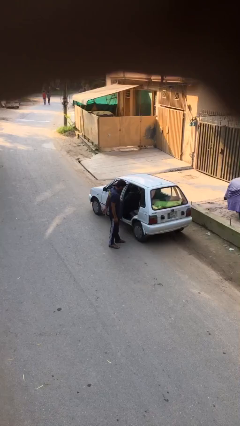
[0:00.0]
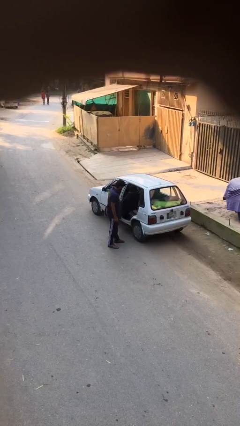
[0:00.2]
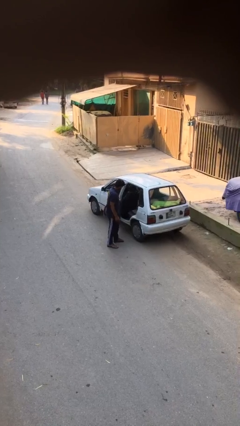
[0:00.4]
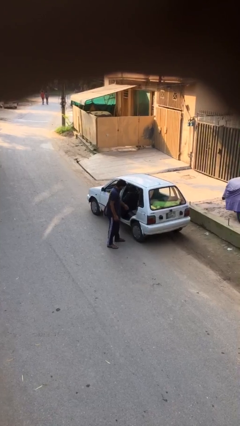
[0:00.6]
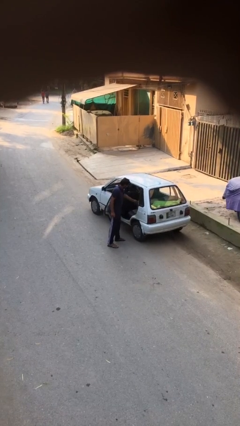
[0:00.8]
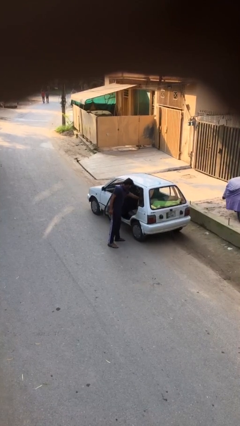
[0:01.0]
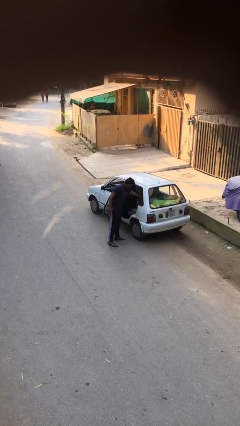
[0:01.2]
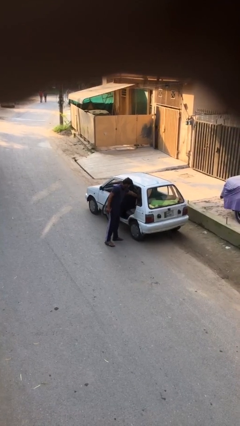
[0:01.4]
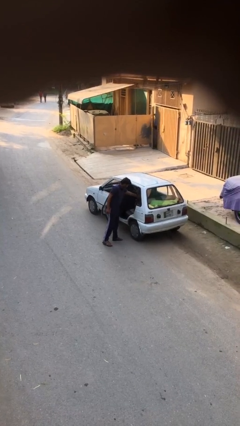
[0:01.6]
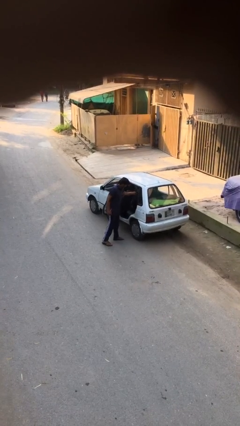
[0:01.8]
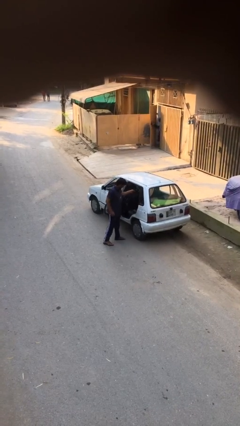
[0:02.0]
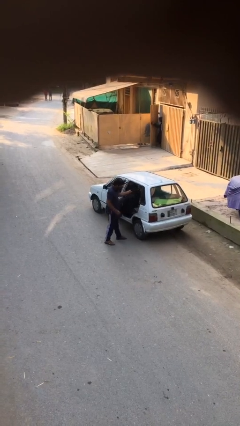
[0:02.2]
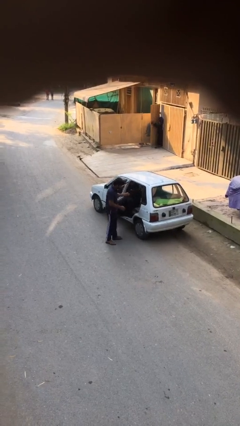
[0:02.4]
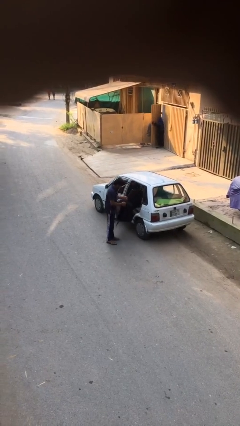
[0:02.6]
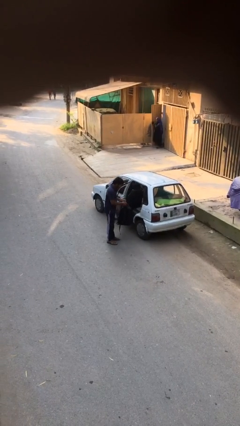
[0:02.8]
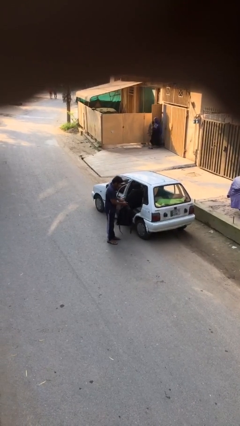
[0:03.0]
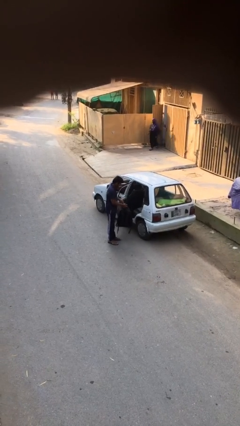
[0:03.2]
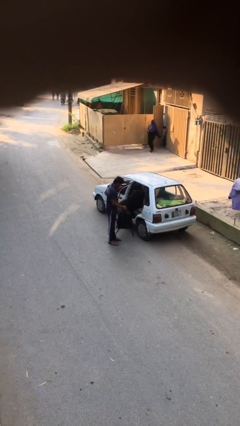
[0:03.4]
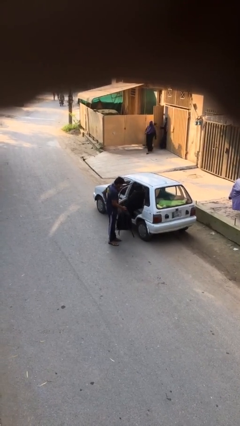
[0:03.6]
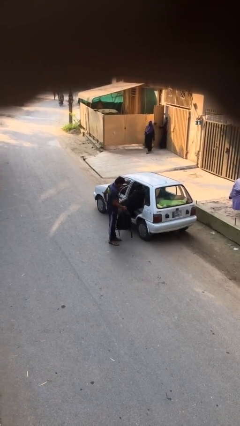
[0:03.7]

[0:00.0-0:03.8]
person unloads car

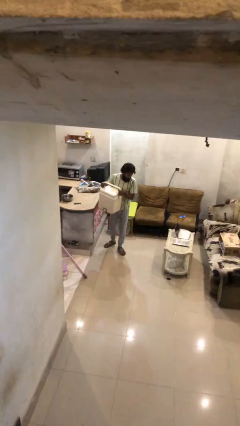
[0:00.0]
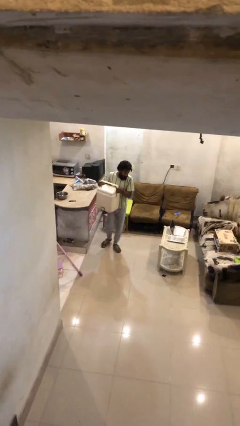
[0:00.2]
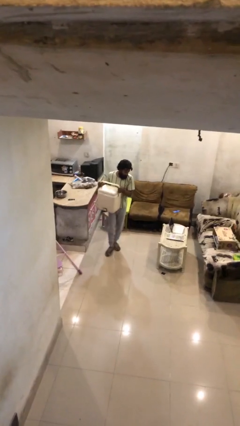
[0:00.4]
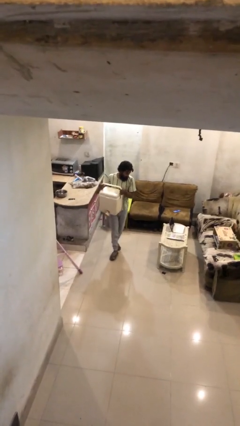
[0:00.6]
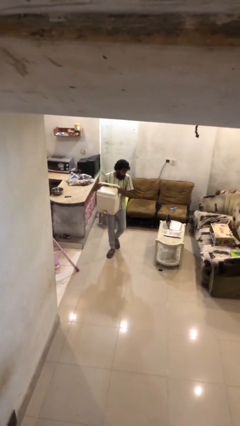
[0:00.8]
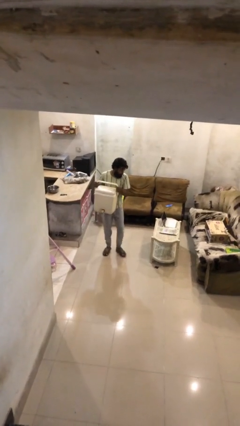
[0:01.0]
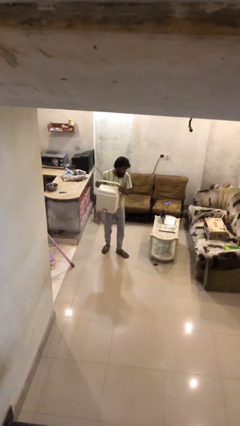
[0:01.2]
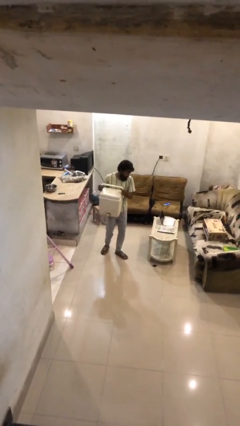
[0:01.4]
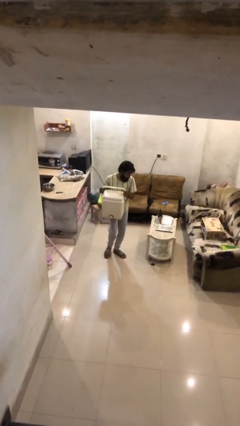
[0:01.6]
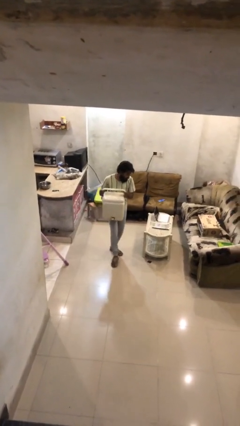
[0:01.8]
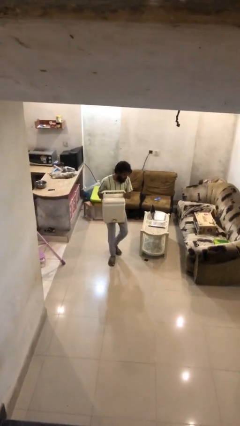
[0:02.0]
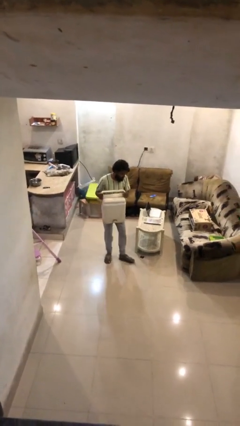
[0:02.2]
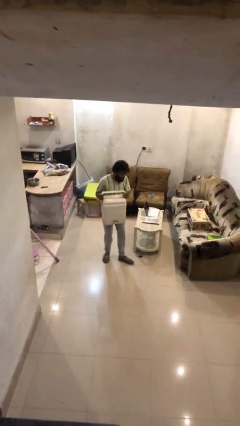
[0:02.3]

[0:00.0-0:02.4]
person carries heavy object

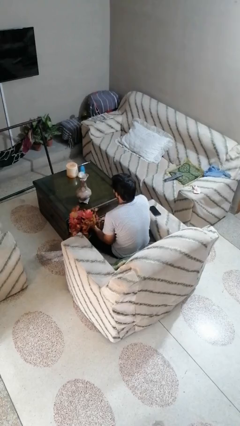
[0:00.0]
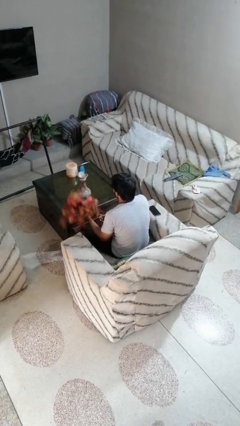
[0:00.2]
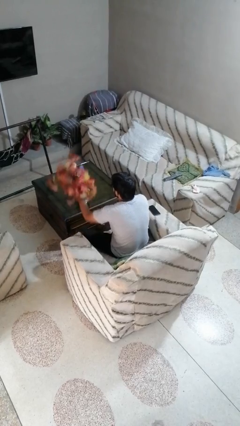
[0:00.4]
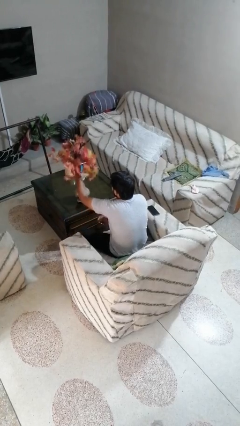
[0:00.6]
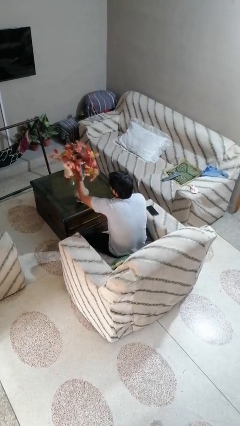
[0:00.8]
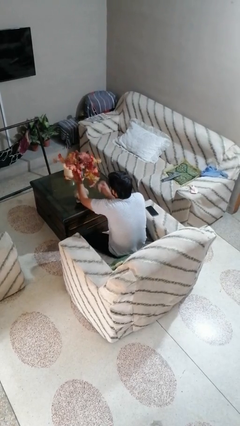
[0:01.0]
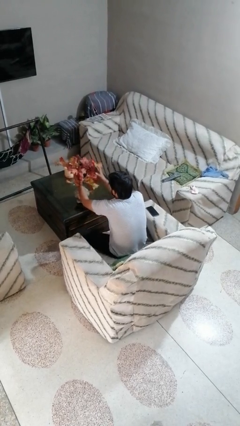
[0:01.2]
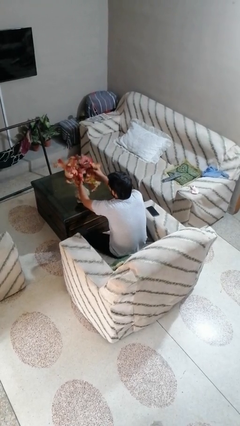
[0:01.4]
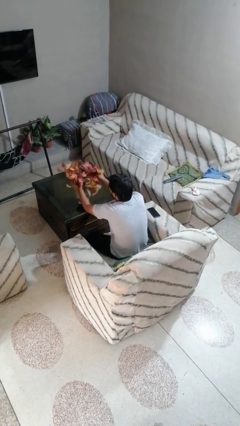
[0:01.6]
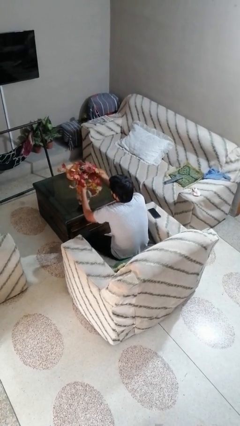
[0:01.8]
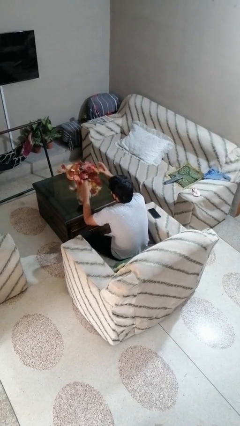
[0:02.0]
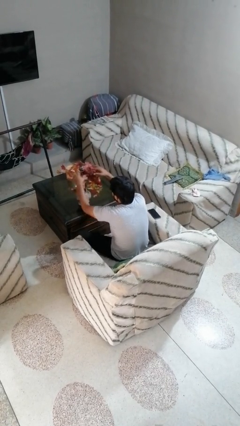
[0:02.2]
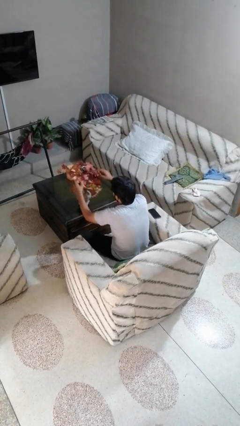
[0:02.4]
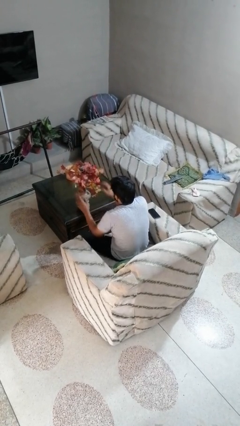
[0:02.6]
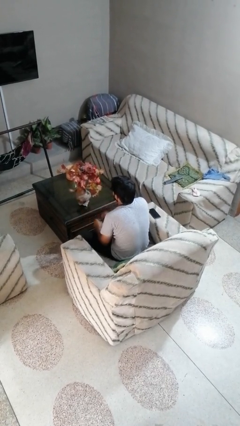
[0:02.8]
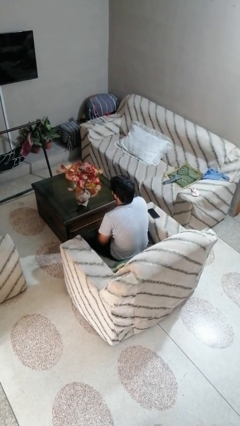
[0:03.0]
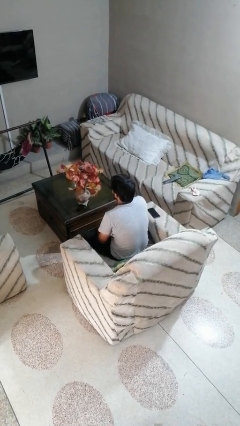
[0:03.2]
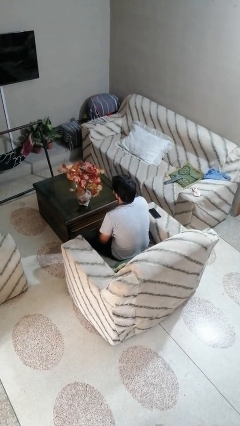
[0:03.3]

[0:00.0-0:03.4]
person arranges flowers in vase

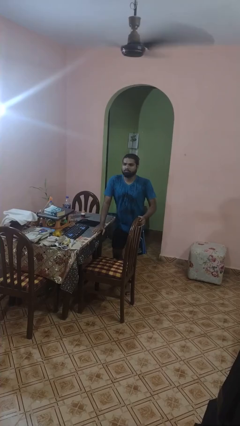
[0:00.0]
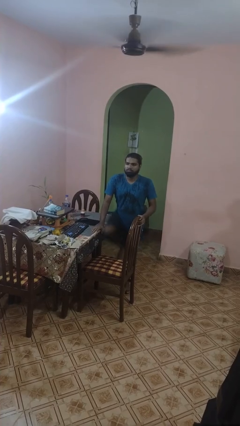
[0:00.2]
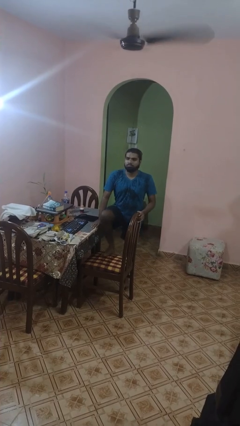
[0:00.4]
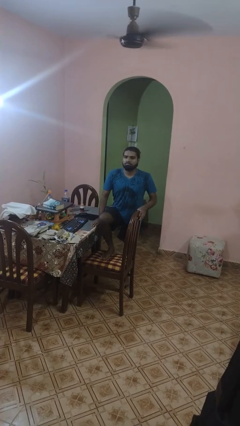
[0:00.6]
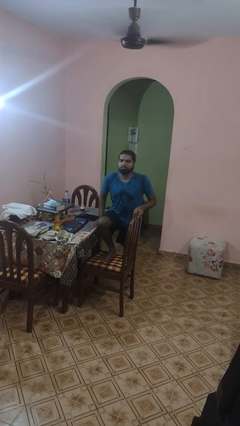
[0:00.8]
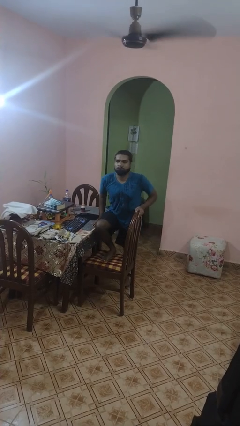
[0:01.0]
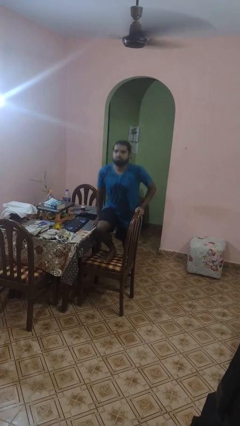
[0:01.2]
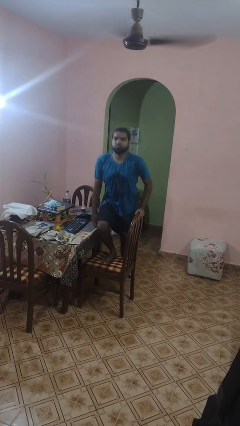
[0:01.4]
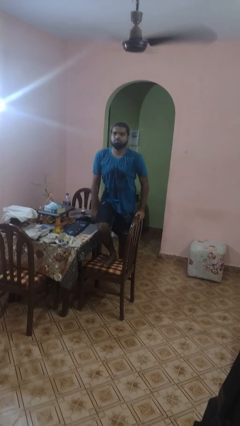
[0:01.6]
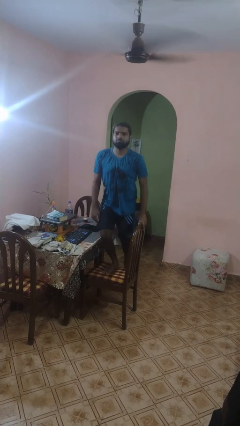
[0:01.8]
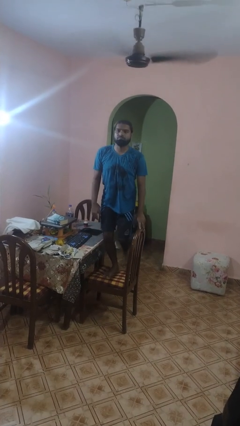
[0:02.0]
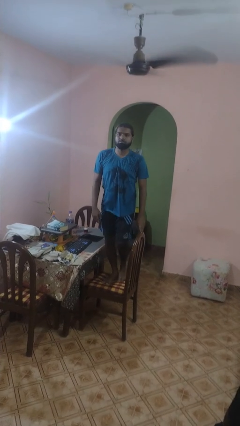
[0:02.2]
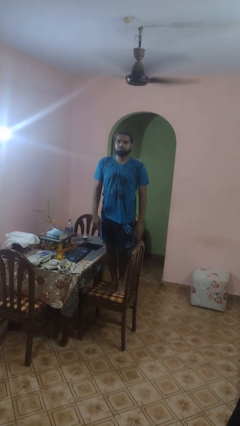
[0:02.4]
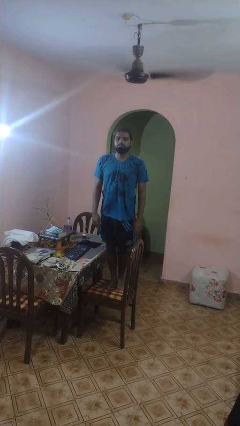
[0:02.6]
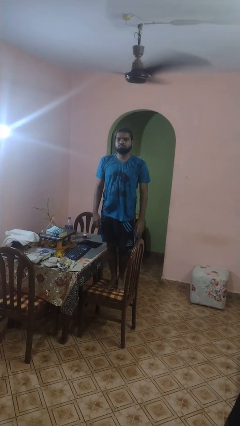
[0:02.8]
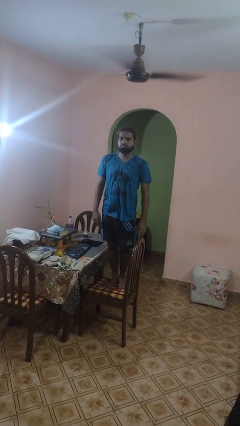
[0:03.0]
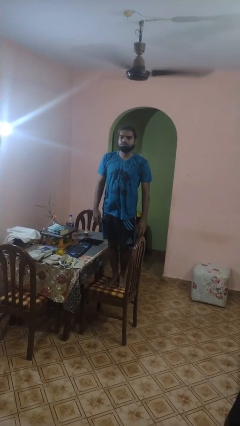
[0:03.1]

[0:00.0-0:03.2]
person climbs on chair

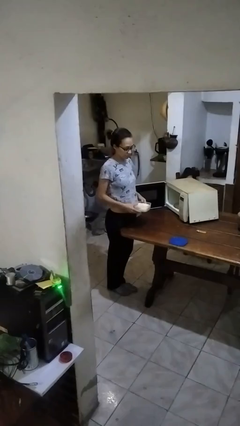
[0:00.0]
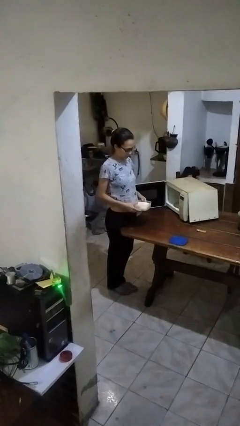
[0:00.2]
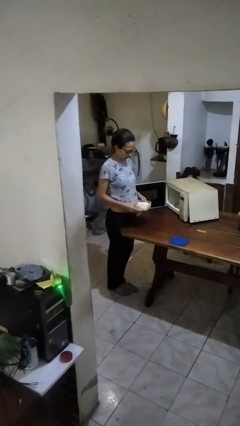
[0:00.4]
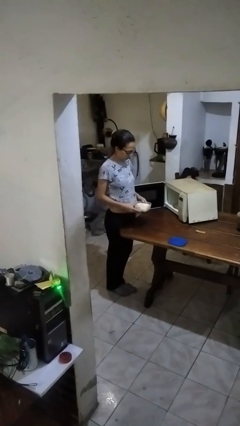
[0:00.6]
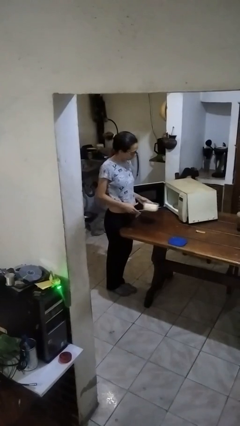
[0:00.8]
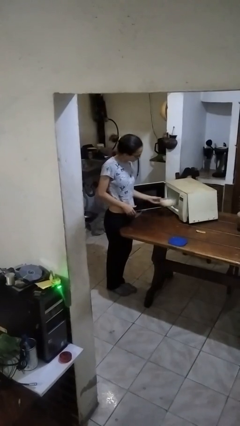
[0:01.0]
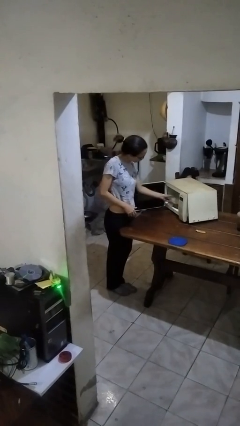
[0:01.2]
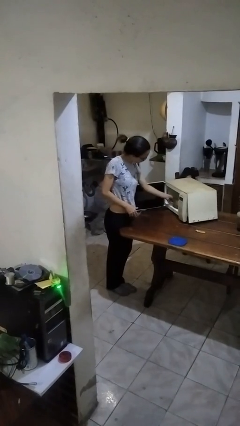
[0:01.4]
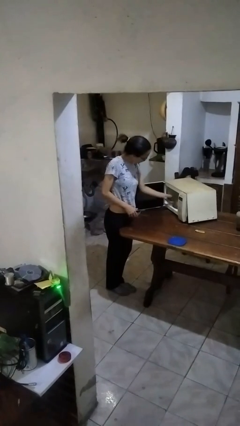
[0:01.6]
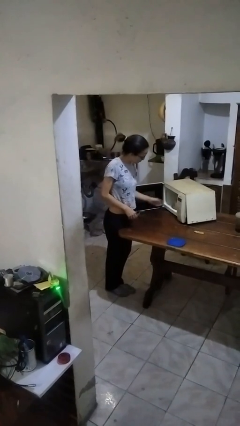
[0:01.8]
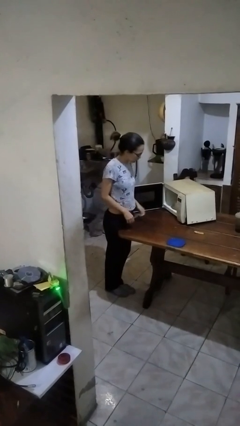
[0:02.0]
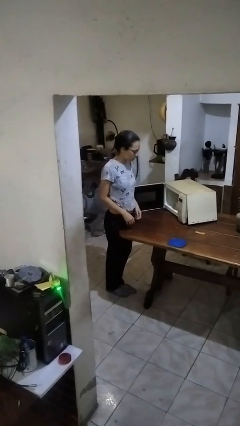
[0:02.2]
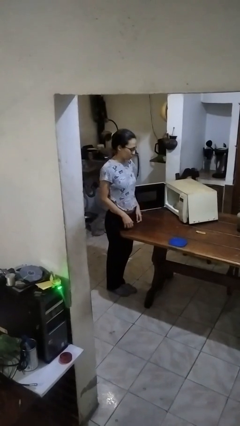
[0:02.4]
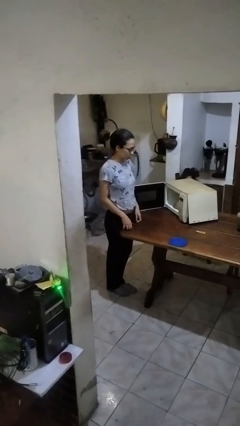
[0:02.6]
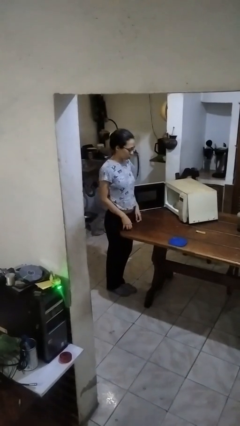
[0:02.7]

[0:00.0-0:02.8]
person puts object into microwave

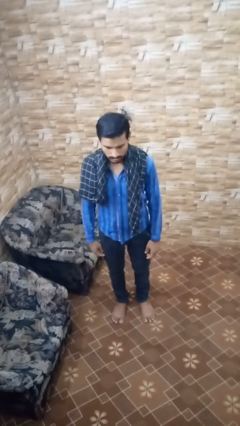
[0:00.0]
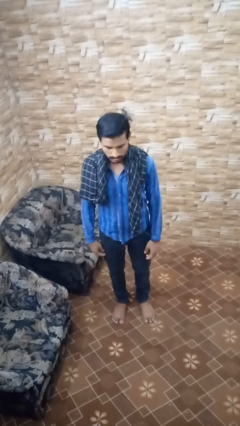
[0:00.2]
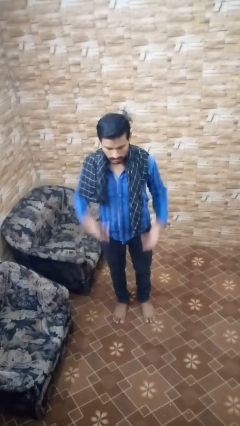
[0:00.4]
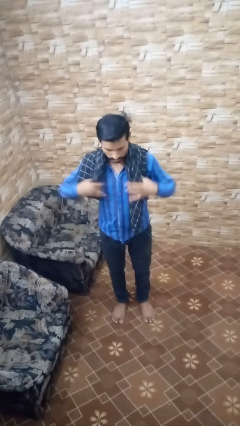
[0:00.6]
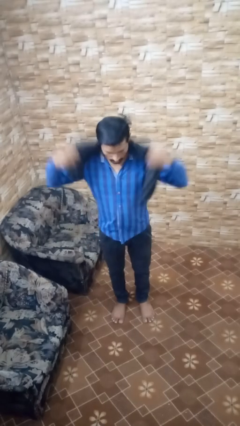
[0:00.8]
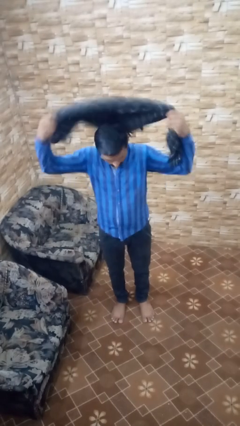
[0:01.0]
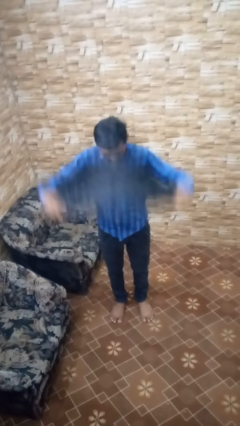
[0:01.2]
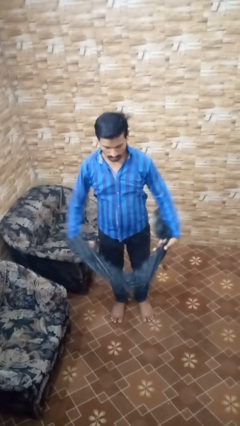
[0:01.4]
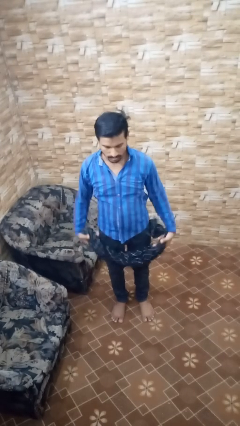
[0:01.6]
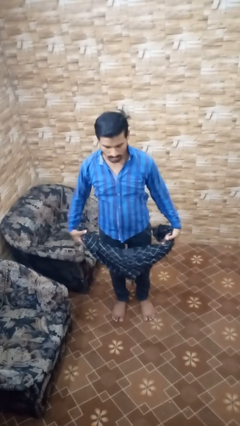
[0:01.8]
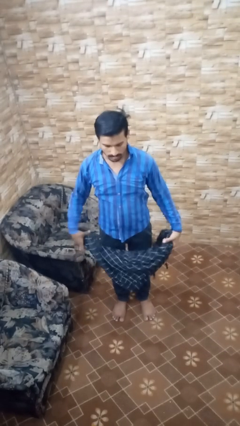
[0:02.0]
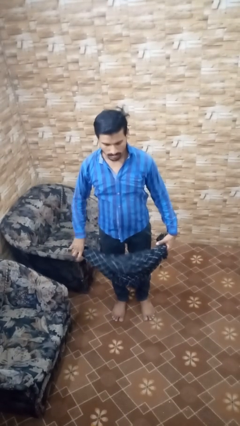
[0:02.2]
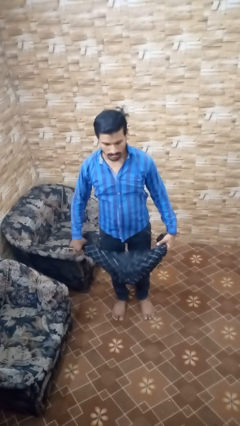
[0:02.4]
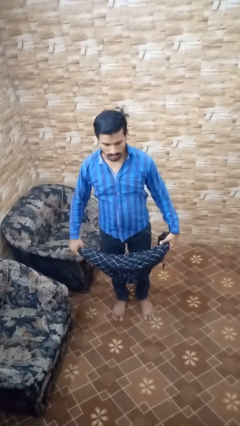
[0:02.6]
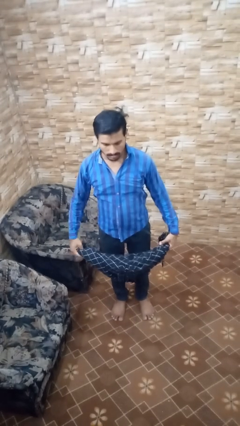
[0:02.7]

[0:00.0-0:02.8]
person takes off scarf
